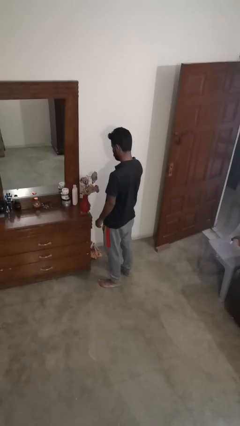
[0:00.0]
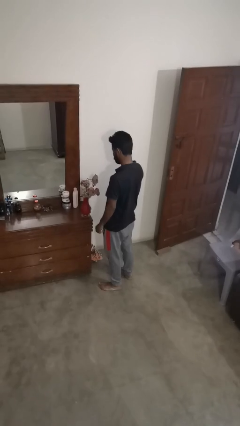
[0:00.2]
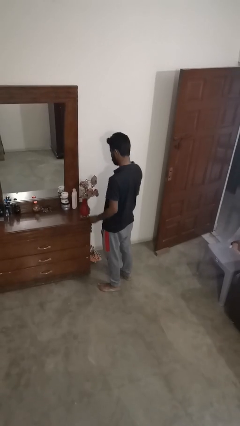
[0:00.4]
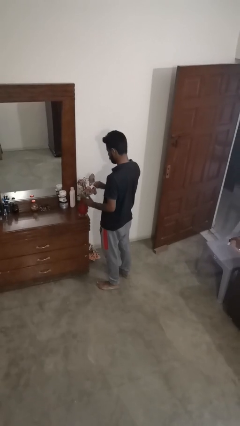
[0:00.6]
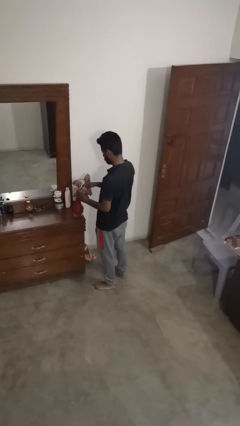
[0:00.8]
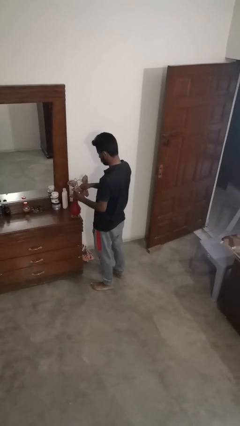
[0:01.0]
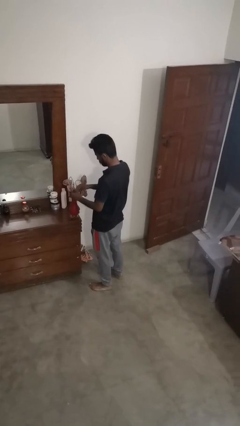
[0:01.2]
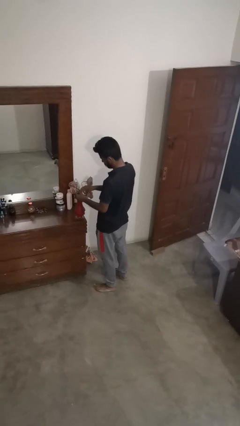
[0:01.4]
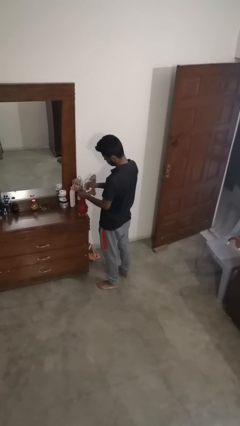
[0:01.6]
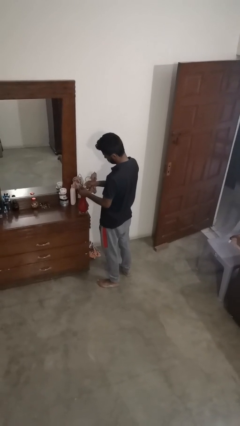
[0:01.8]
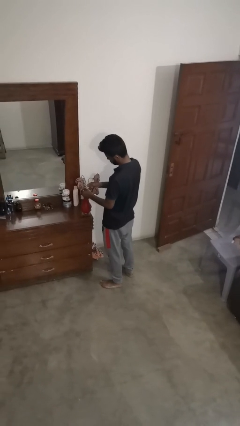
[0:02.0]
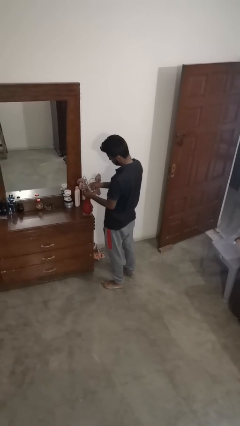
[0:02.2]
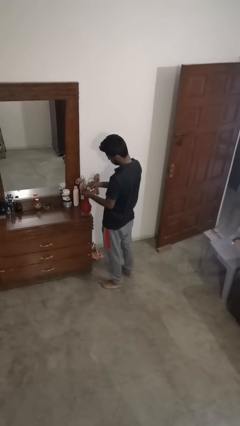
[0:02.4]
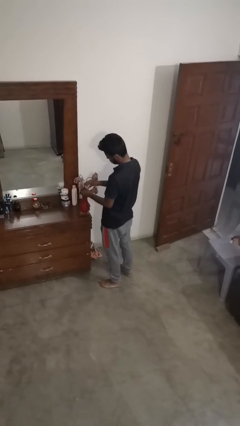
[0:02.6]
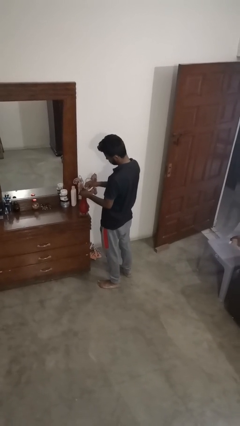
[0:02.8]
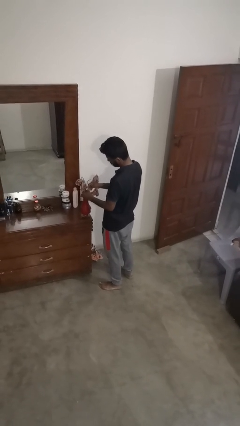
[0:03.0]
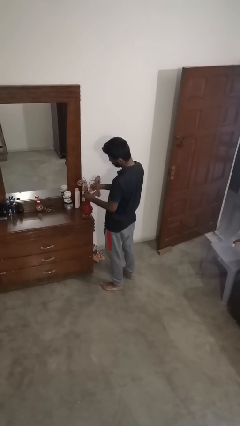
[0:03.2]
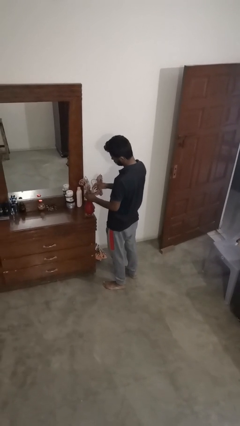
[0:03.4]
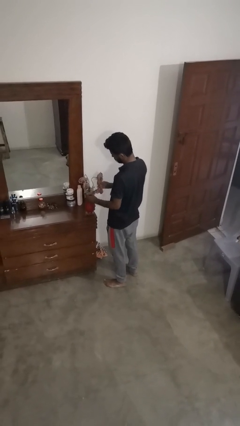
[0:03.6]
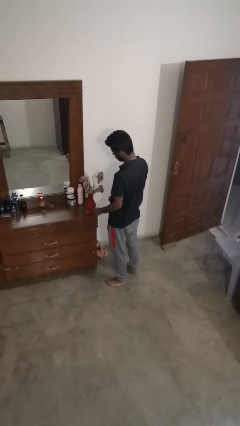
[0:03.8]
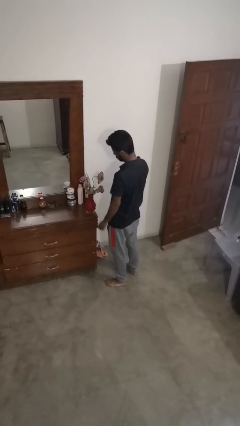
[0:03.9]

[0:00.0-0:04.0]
person arranges flowers in vase

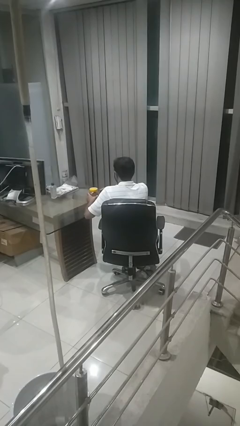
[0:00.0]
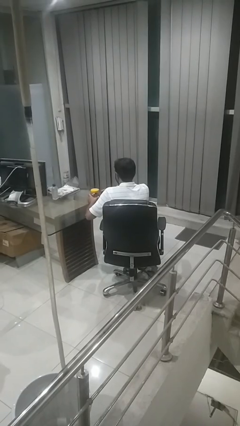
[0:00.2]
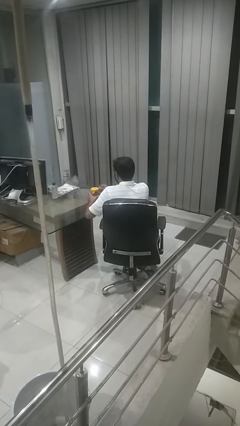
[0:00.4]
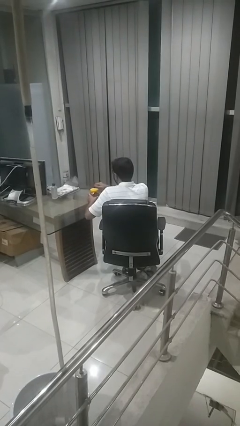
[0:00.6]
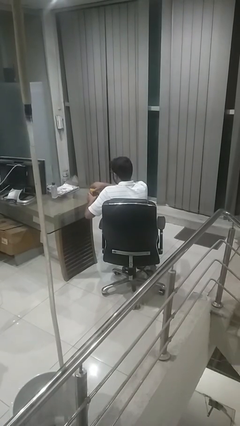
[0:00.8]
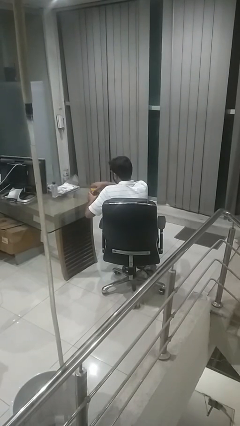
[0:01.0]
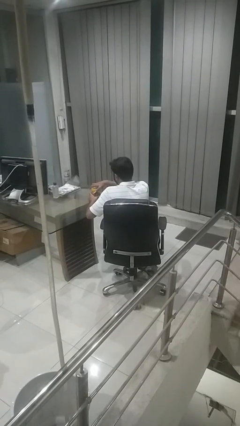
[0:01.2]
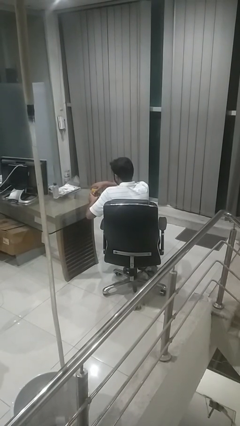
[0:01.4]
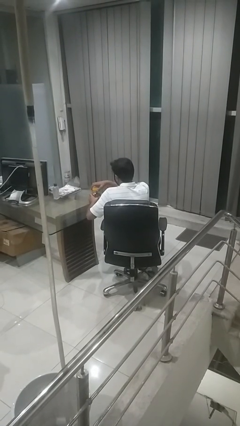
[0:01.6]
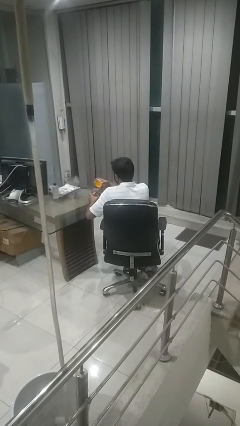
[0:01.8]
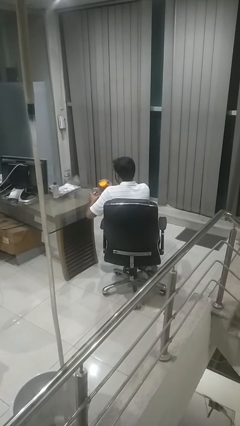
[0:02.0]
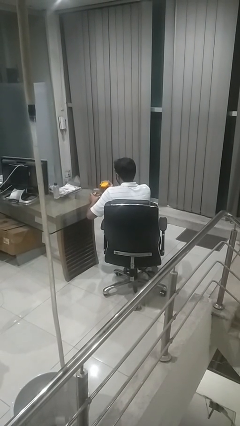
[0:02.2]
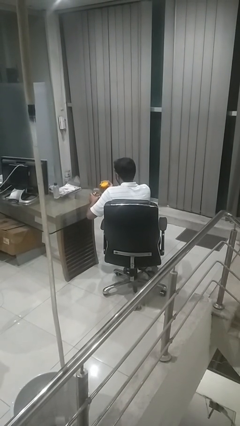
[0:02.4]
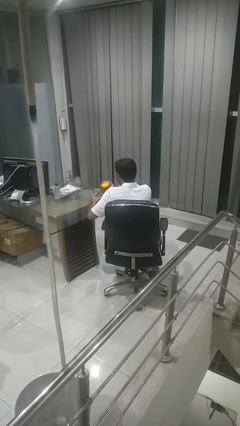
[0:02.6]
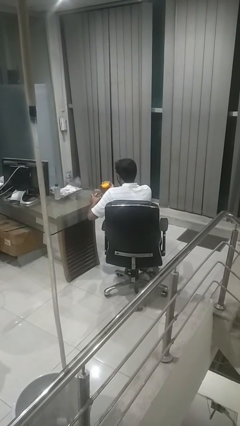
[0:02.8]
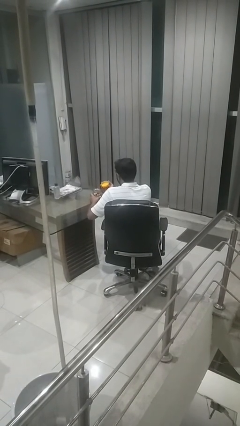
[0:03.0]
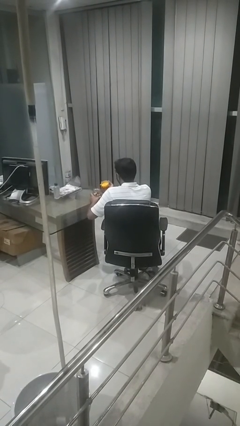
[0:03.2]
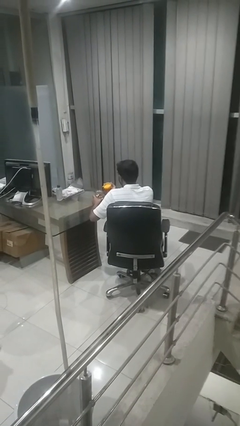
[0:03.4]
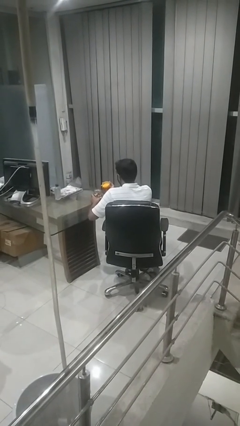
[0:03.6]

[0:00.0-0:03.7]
person opens jar

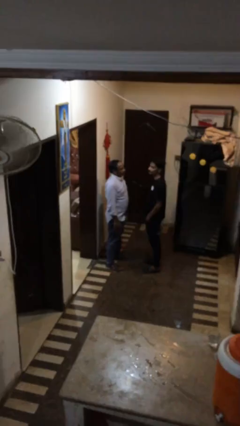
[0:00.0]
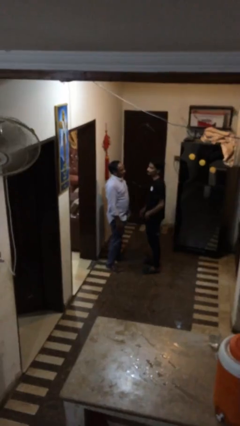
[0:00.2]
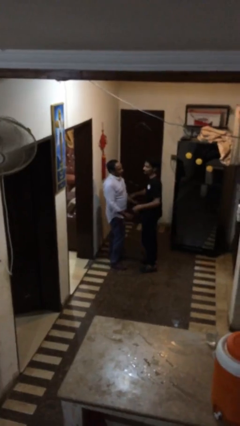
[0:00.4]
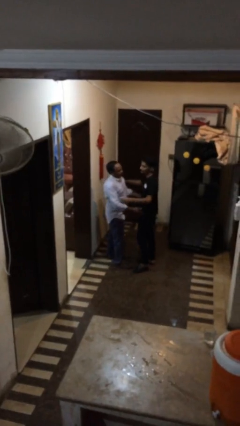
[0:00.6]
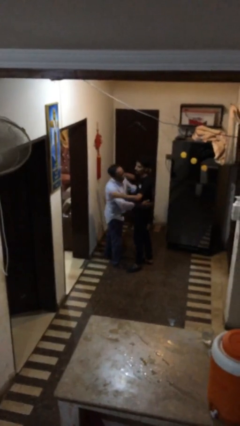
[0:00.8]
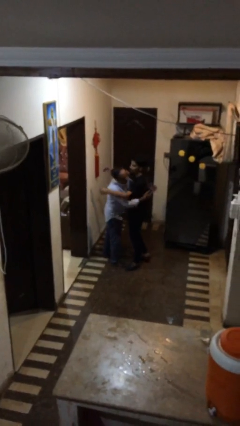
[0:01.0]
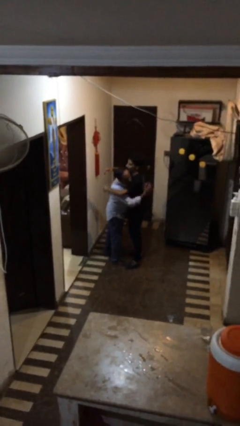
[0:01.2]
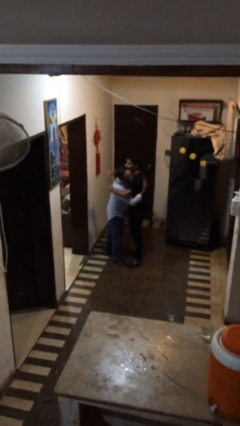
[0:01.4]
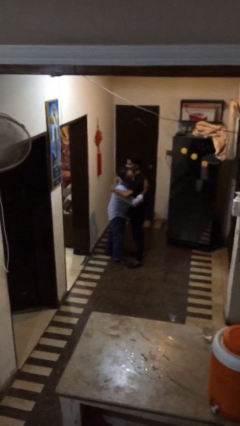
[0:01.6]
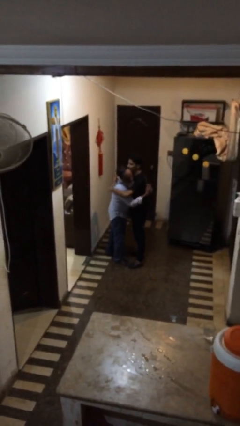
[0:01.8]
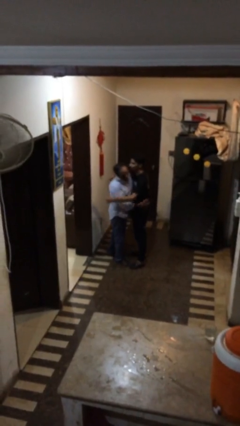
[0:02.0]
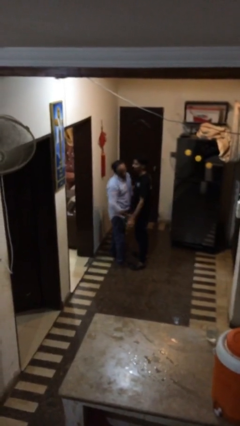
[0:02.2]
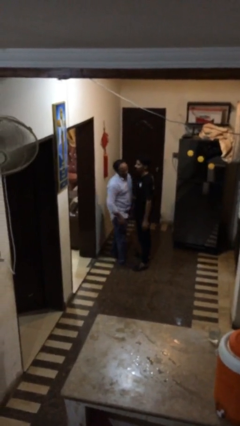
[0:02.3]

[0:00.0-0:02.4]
person embraces person

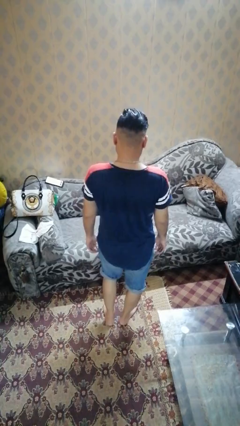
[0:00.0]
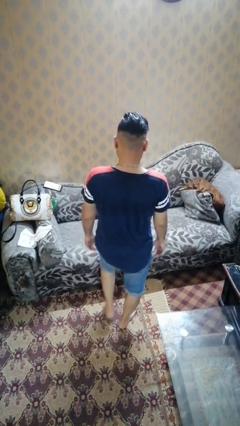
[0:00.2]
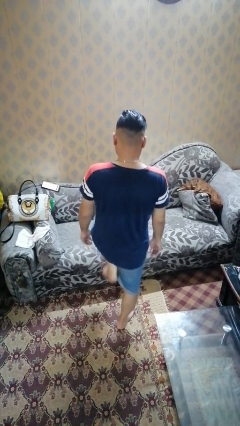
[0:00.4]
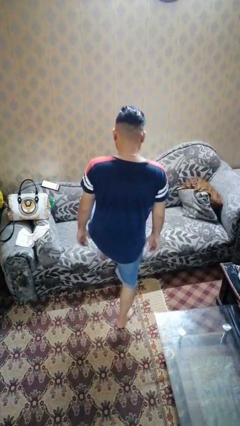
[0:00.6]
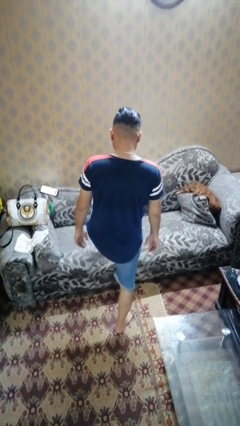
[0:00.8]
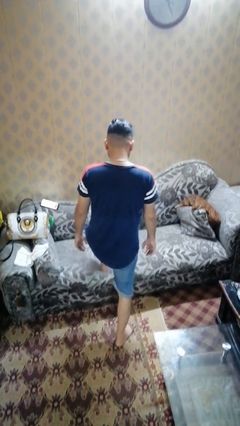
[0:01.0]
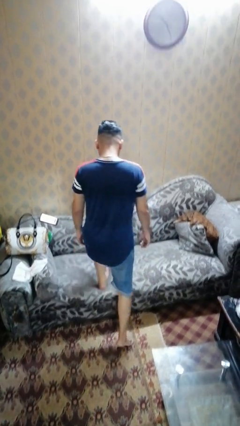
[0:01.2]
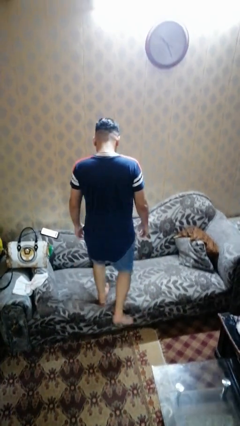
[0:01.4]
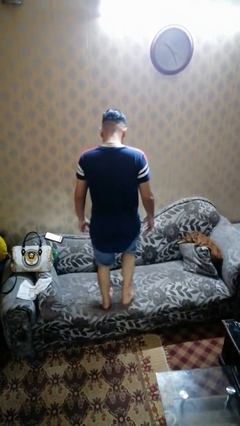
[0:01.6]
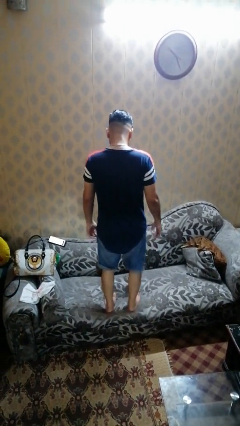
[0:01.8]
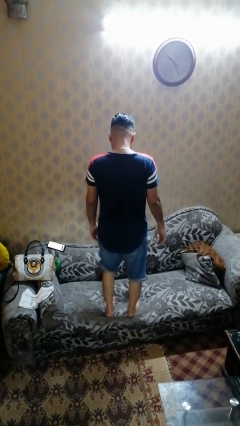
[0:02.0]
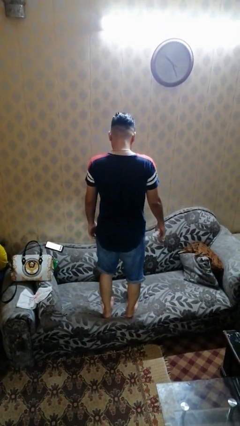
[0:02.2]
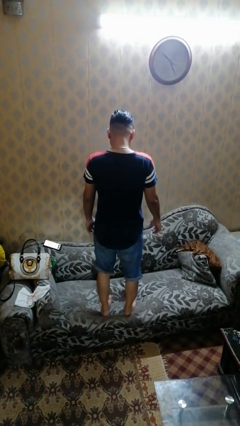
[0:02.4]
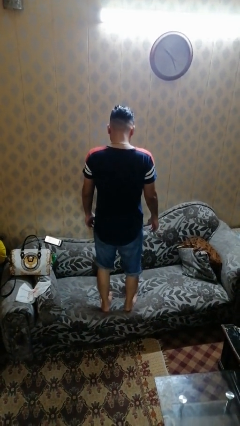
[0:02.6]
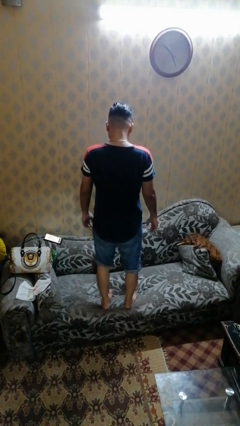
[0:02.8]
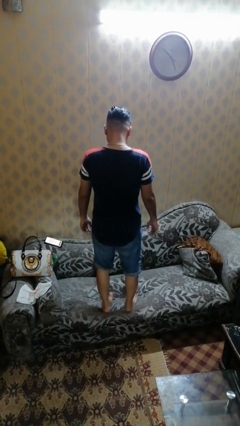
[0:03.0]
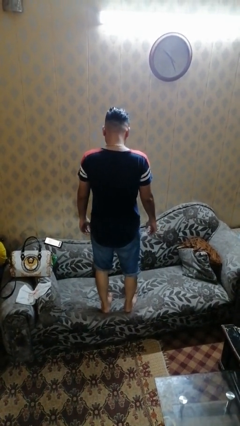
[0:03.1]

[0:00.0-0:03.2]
person climbs on couch

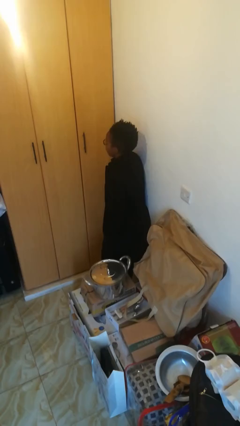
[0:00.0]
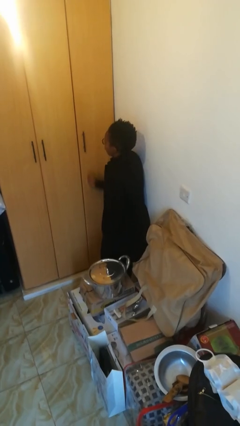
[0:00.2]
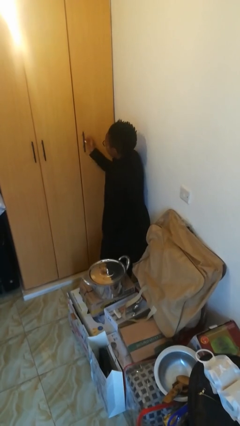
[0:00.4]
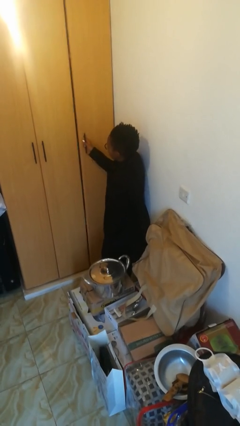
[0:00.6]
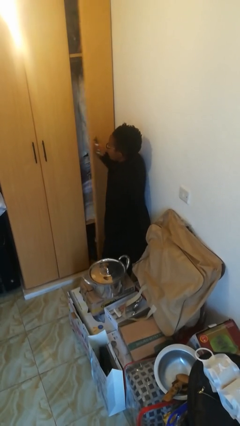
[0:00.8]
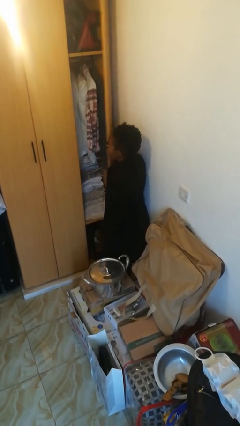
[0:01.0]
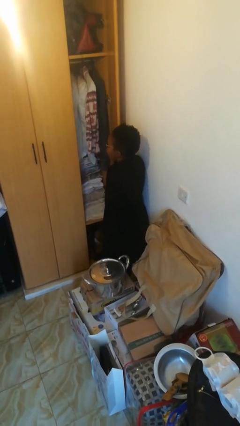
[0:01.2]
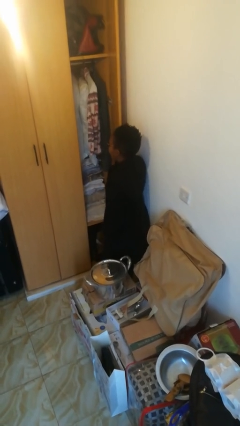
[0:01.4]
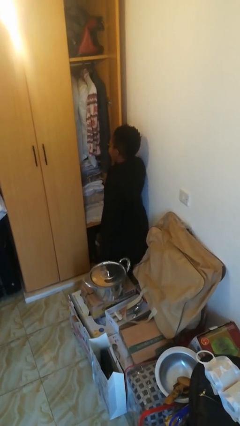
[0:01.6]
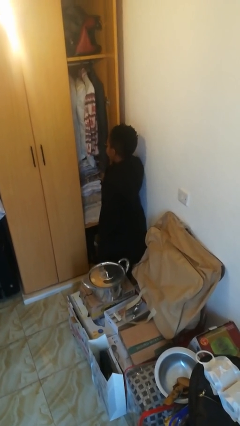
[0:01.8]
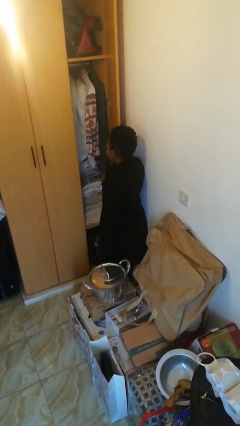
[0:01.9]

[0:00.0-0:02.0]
person opens closet door

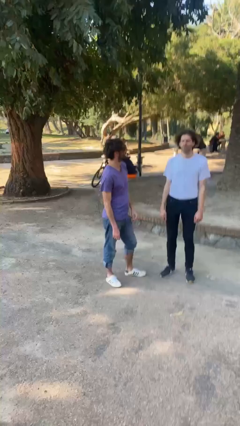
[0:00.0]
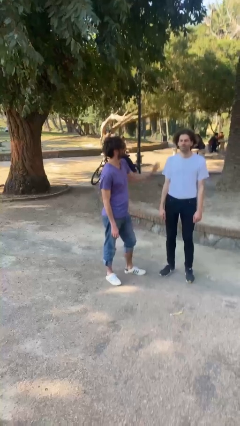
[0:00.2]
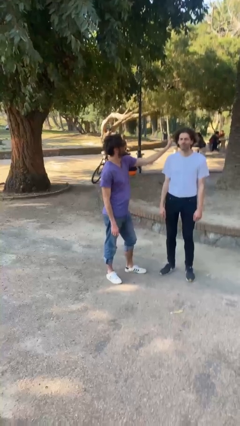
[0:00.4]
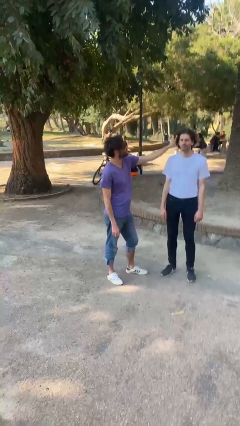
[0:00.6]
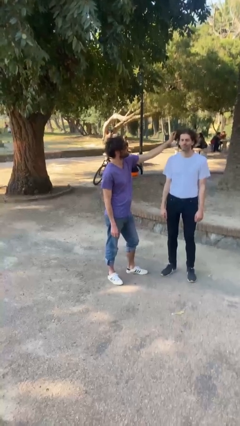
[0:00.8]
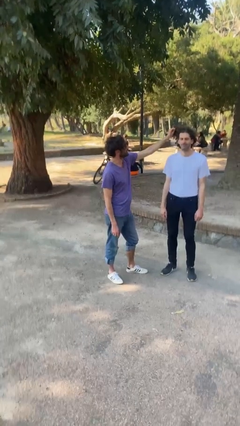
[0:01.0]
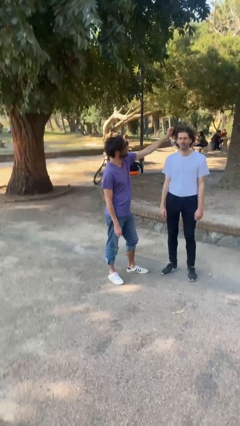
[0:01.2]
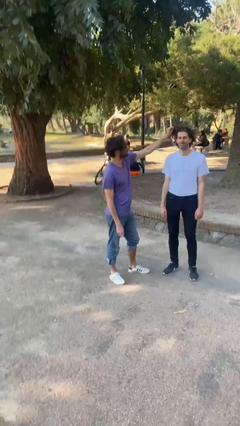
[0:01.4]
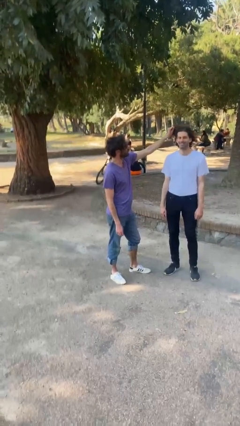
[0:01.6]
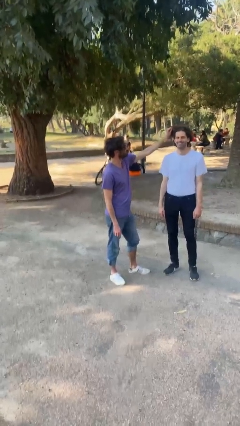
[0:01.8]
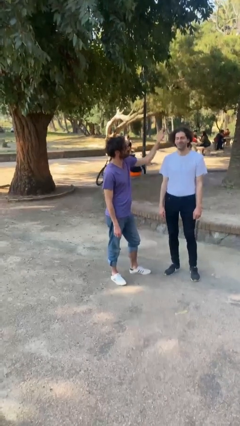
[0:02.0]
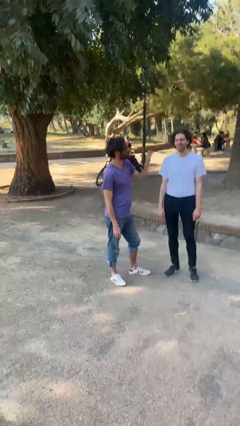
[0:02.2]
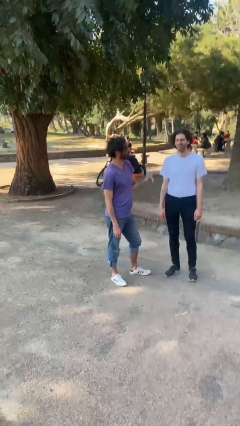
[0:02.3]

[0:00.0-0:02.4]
person grabs person by hair
